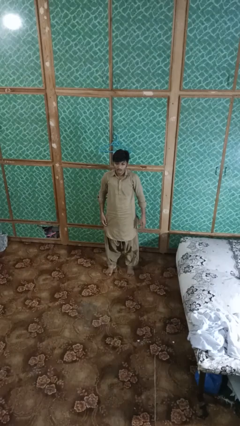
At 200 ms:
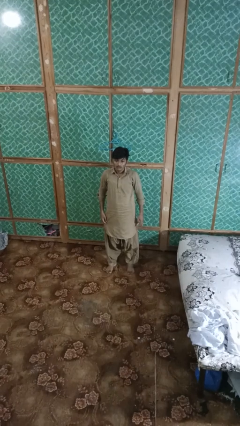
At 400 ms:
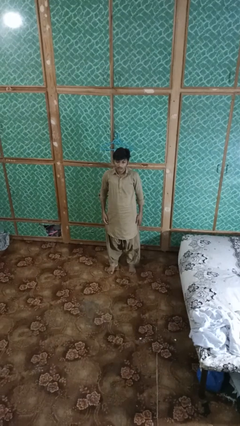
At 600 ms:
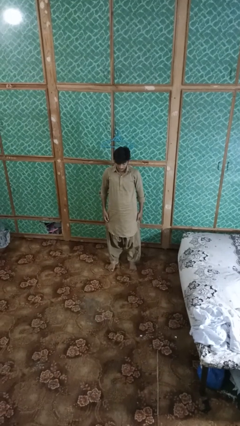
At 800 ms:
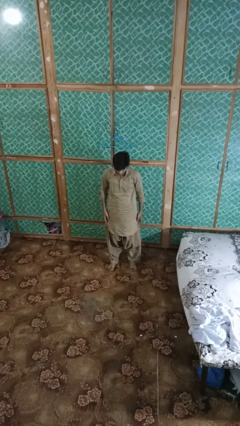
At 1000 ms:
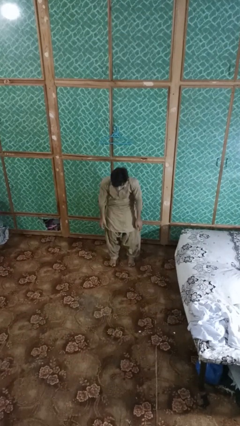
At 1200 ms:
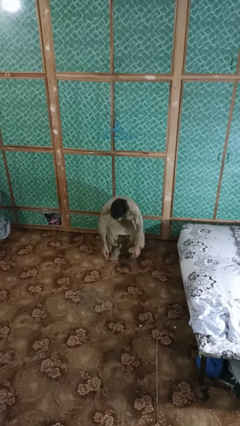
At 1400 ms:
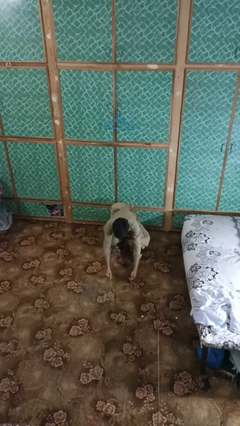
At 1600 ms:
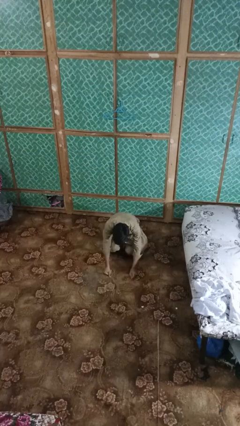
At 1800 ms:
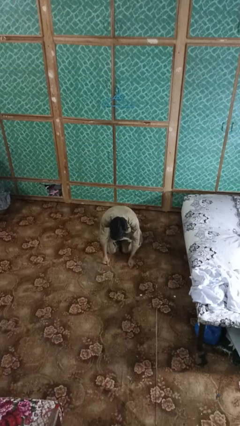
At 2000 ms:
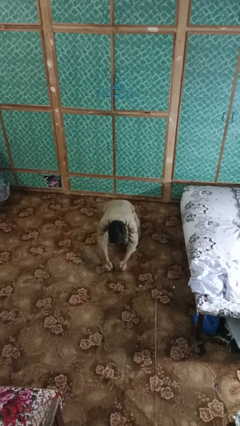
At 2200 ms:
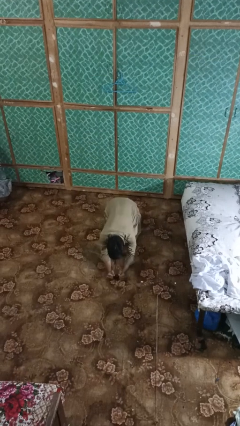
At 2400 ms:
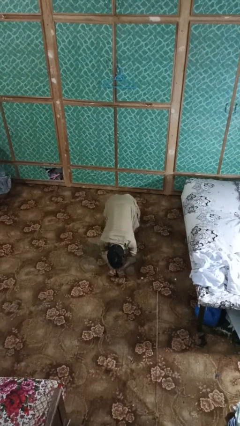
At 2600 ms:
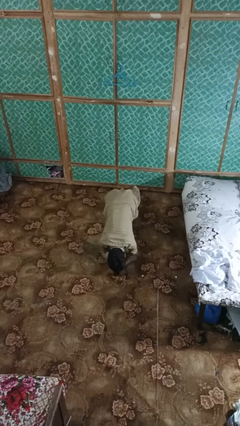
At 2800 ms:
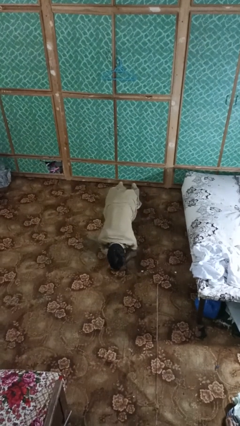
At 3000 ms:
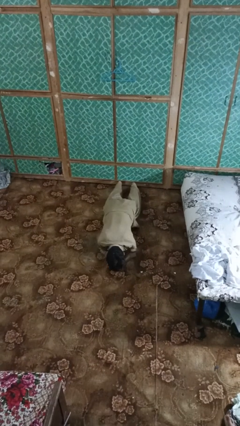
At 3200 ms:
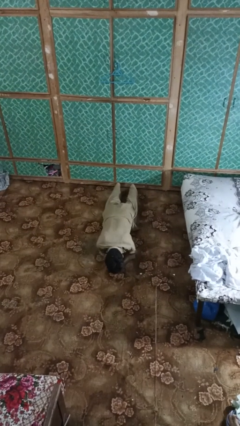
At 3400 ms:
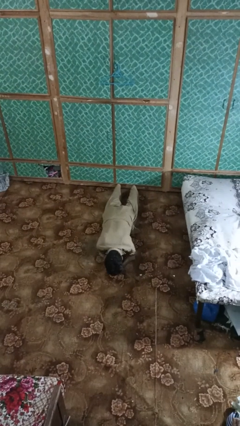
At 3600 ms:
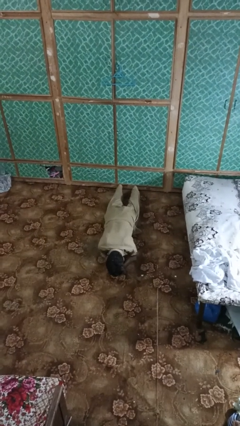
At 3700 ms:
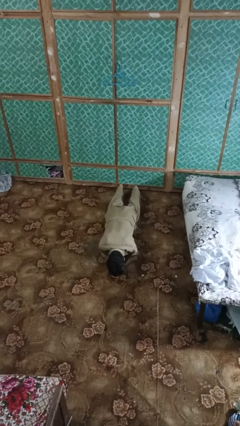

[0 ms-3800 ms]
person exercises with plank

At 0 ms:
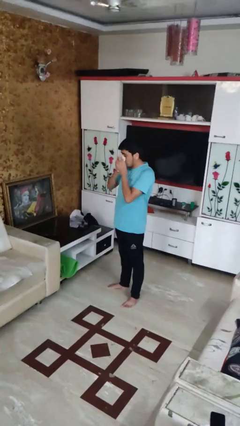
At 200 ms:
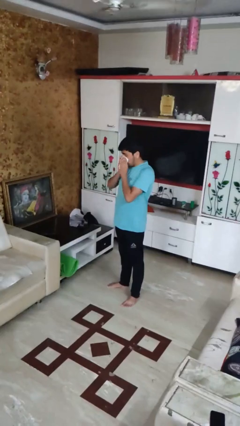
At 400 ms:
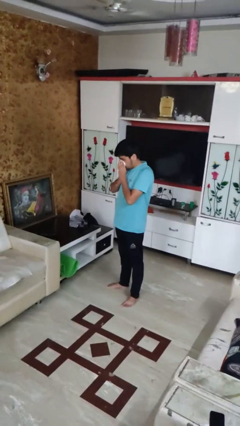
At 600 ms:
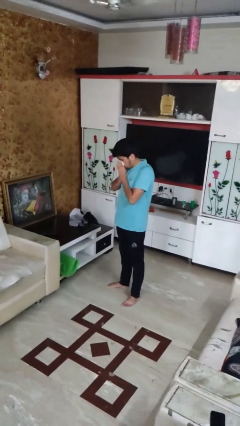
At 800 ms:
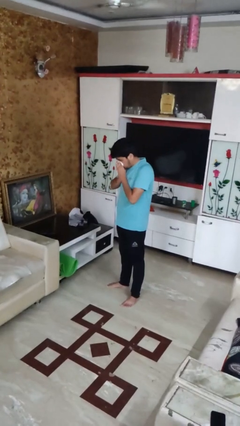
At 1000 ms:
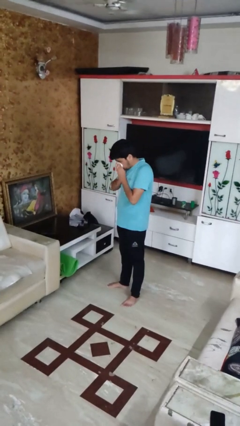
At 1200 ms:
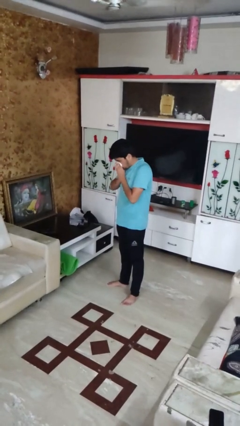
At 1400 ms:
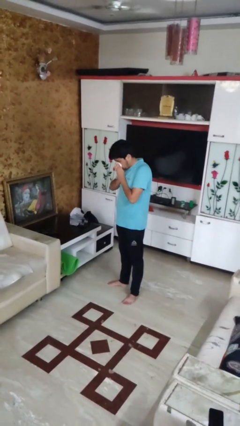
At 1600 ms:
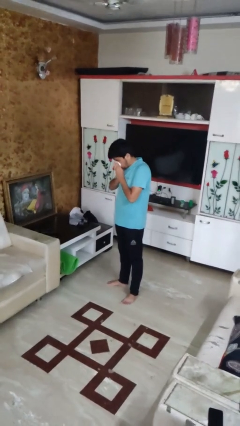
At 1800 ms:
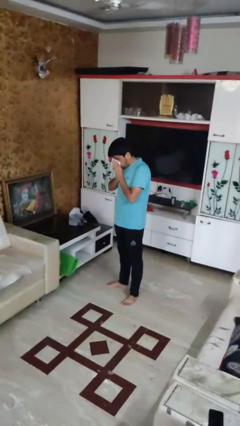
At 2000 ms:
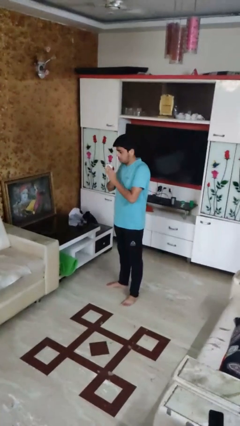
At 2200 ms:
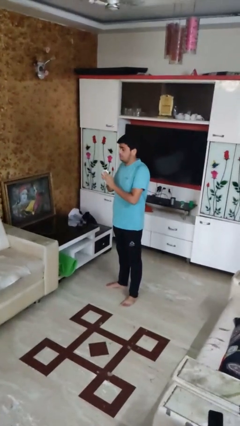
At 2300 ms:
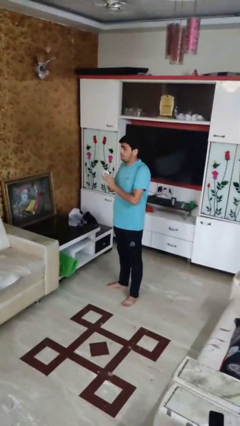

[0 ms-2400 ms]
person blows nose

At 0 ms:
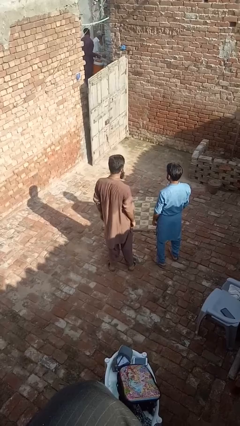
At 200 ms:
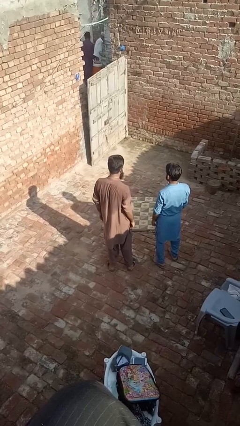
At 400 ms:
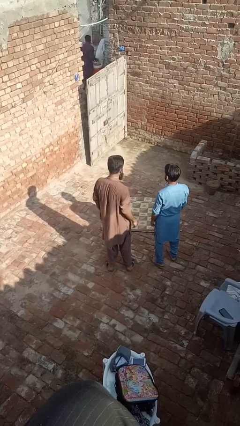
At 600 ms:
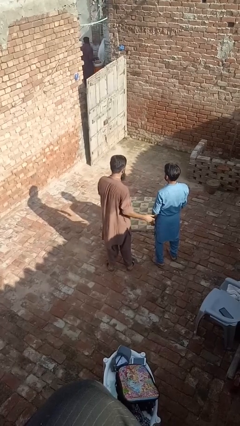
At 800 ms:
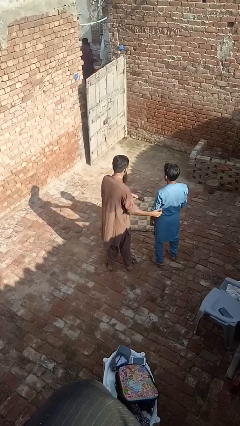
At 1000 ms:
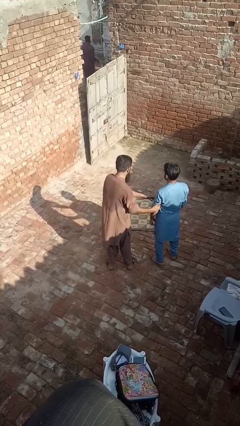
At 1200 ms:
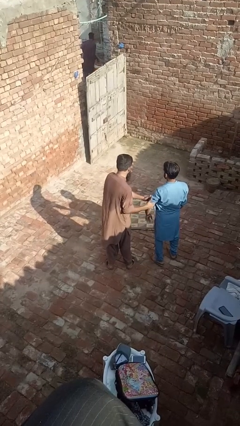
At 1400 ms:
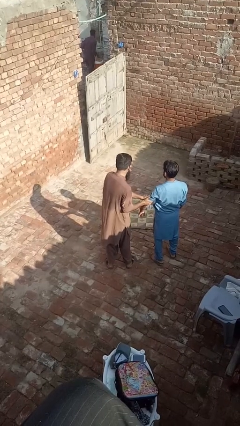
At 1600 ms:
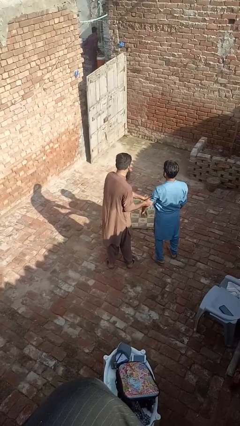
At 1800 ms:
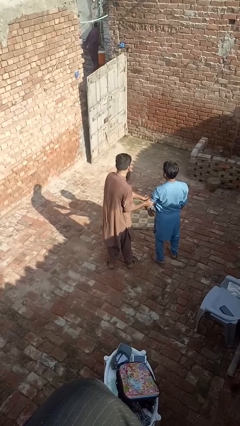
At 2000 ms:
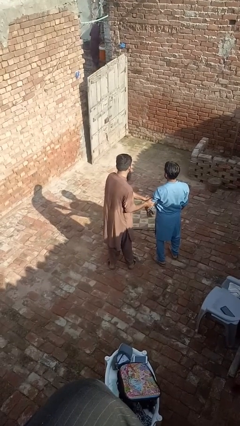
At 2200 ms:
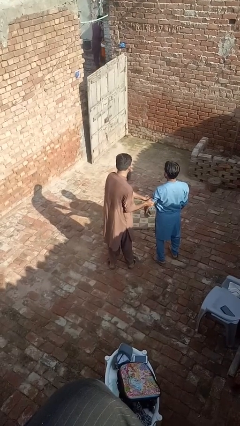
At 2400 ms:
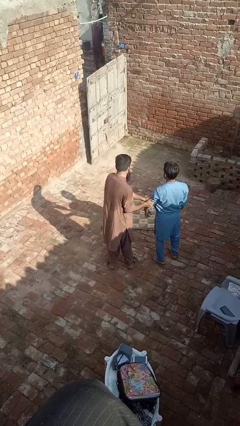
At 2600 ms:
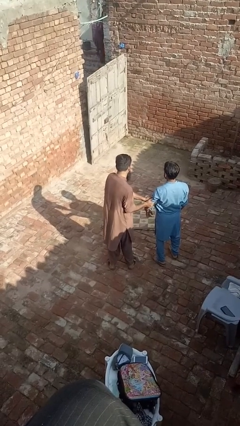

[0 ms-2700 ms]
person grabs person by bicep

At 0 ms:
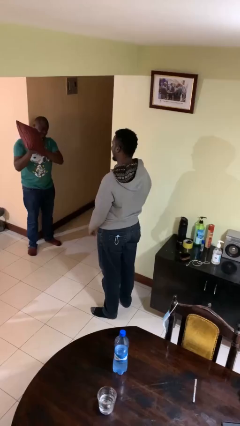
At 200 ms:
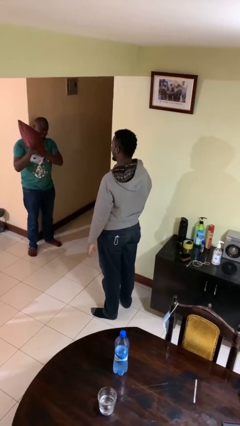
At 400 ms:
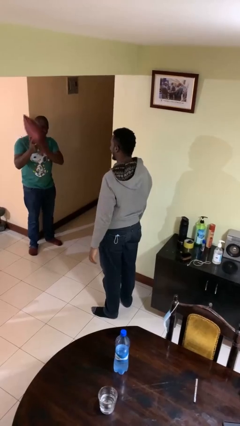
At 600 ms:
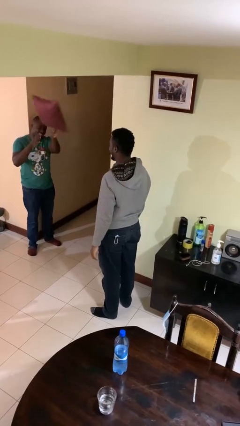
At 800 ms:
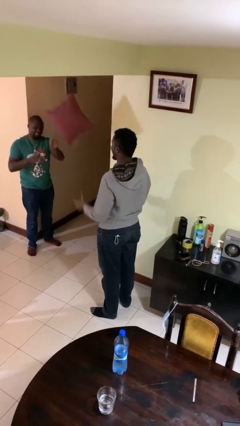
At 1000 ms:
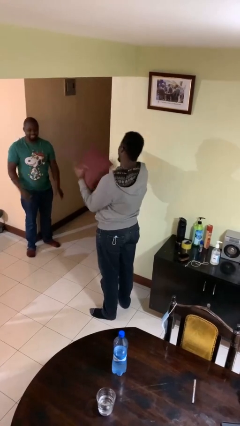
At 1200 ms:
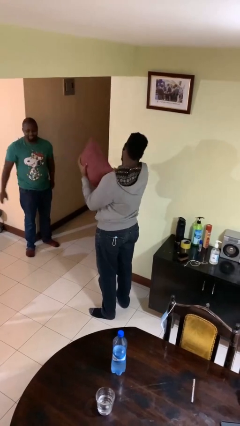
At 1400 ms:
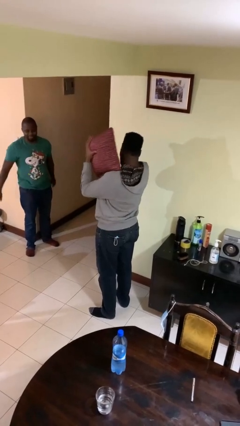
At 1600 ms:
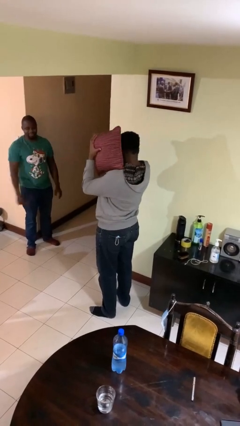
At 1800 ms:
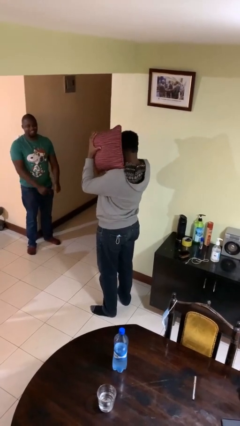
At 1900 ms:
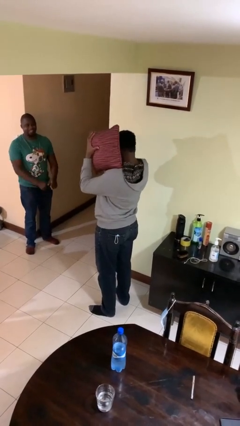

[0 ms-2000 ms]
person catches object from person

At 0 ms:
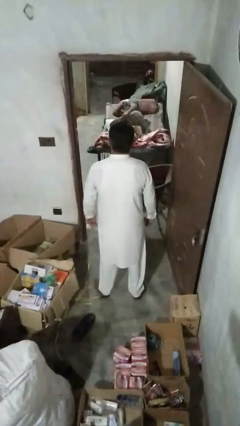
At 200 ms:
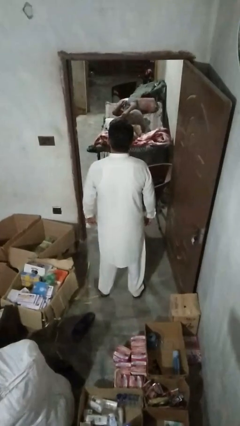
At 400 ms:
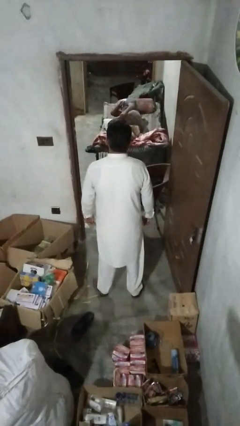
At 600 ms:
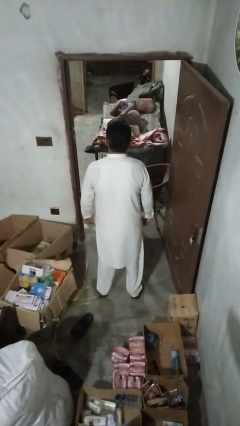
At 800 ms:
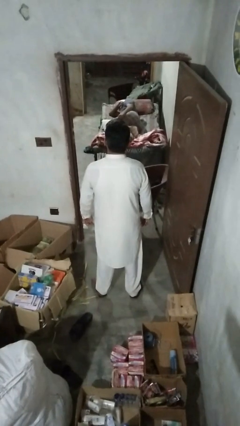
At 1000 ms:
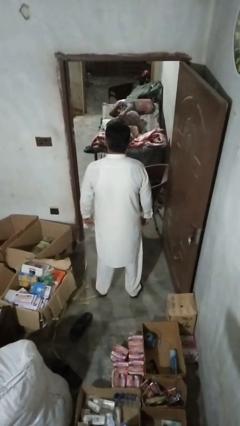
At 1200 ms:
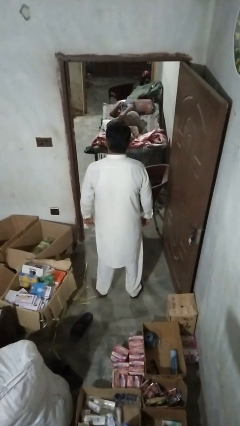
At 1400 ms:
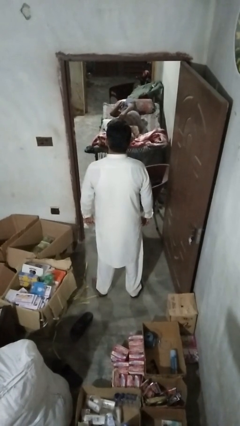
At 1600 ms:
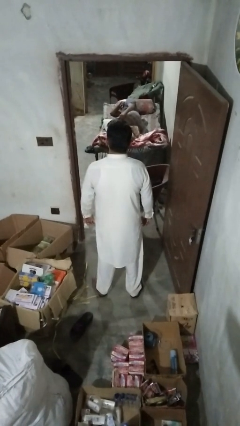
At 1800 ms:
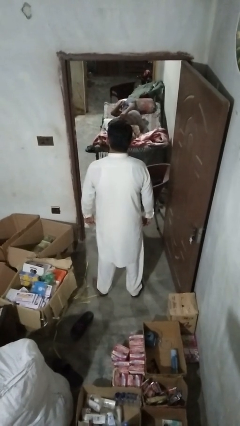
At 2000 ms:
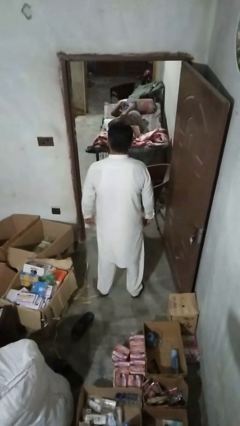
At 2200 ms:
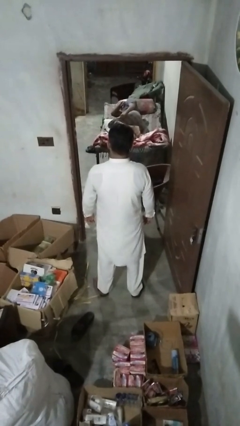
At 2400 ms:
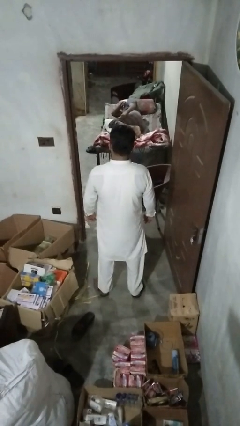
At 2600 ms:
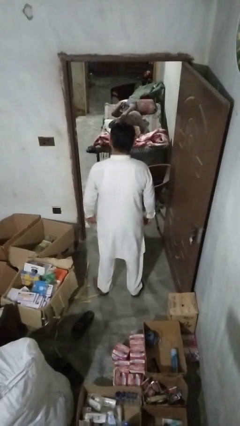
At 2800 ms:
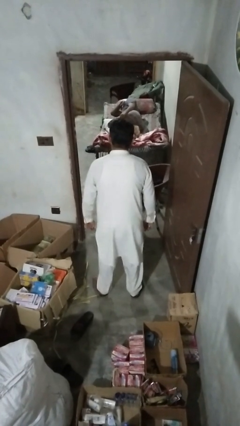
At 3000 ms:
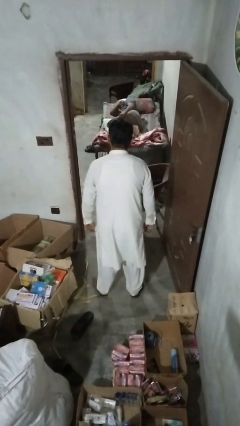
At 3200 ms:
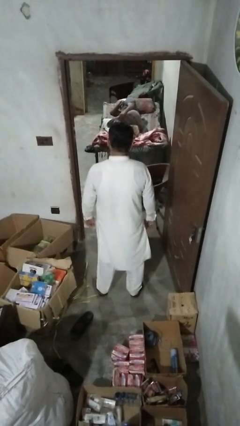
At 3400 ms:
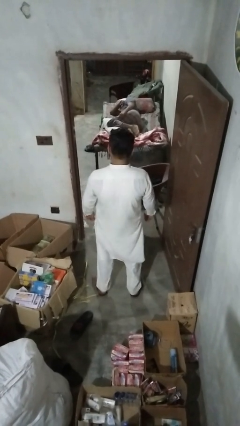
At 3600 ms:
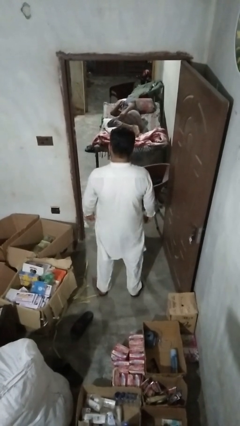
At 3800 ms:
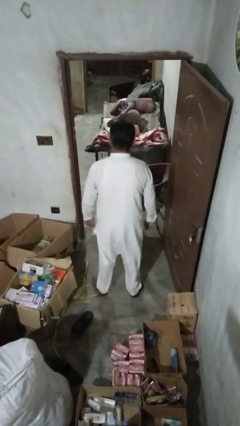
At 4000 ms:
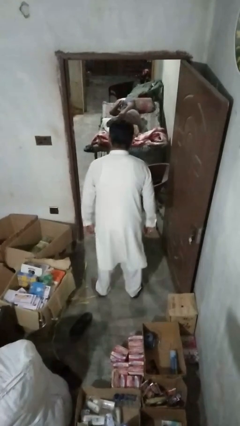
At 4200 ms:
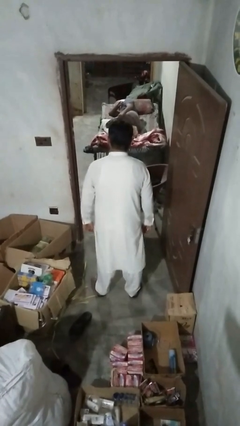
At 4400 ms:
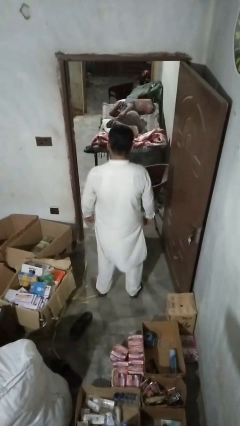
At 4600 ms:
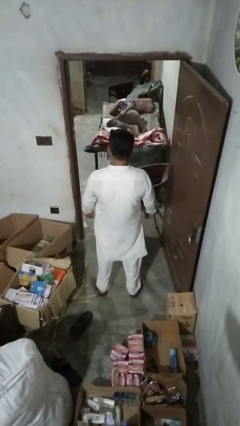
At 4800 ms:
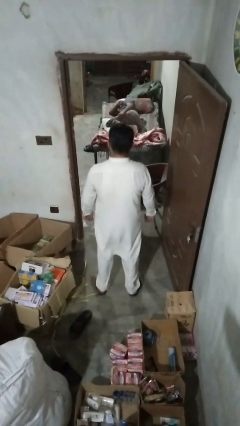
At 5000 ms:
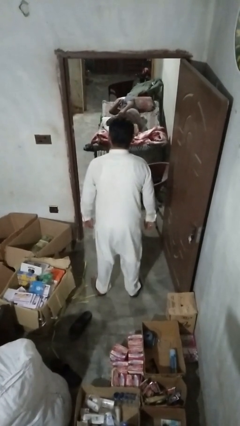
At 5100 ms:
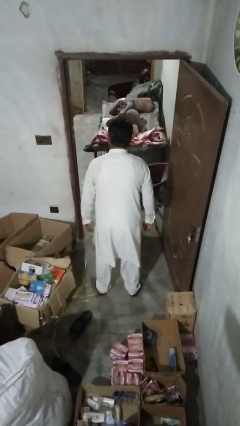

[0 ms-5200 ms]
person wiggles hips

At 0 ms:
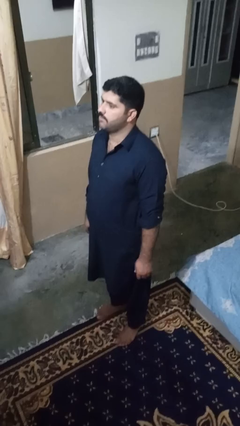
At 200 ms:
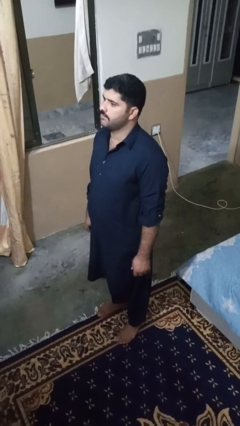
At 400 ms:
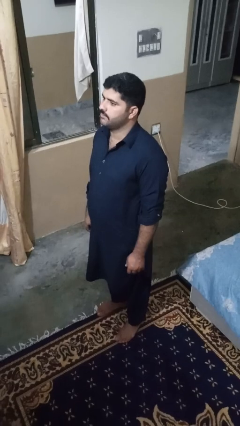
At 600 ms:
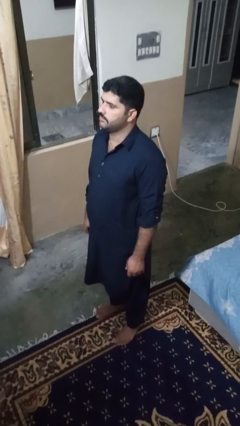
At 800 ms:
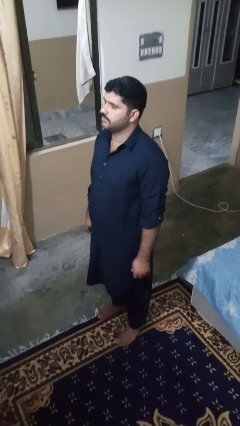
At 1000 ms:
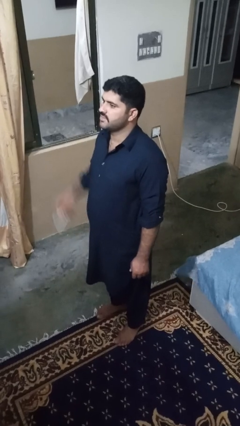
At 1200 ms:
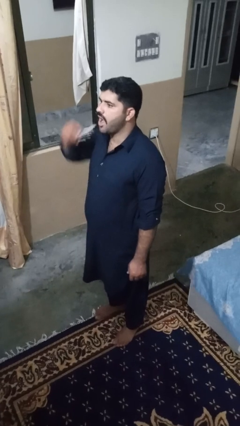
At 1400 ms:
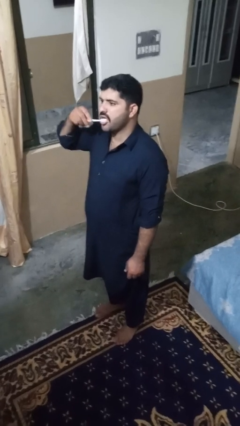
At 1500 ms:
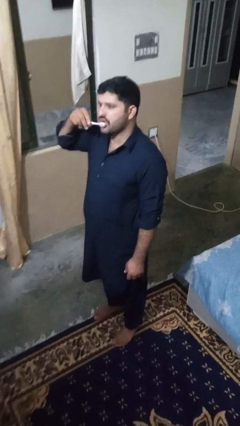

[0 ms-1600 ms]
person brushes teeth
